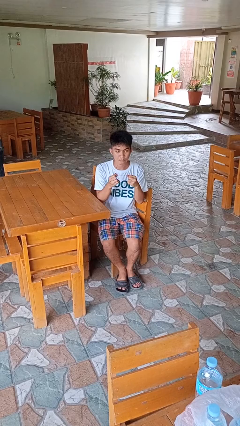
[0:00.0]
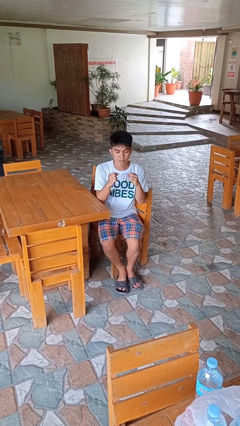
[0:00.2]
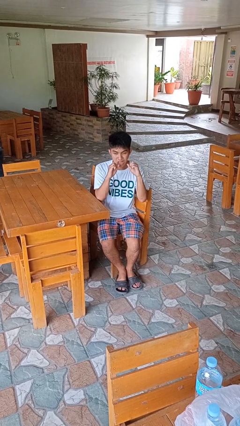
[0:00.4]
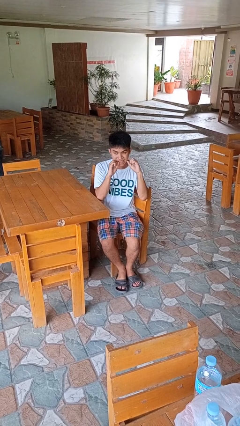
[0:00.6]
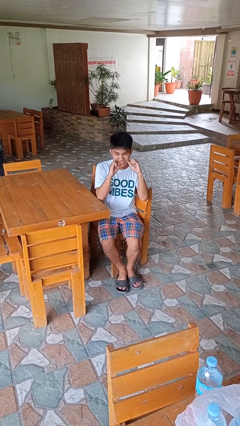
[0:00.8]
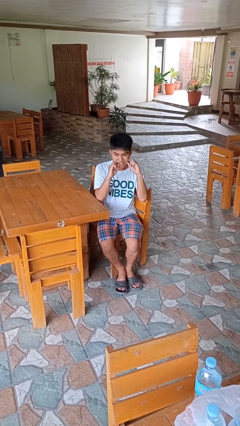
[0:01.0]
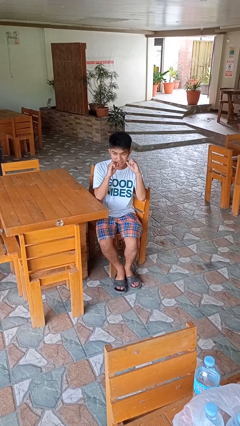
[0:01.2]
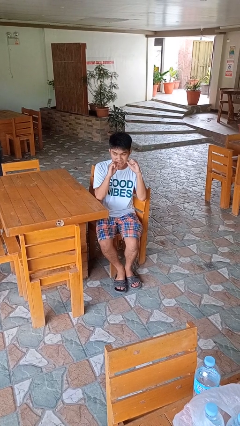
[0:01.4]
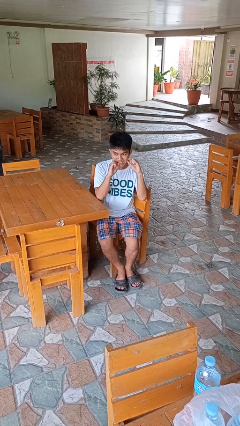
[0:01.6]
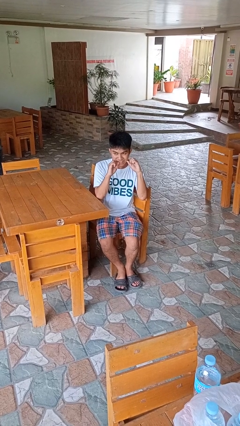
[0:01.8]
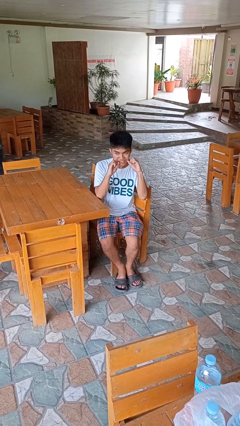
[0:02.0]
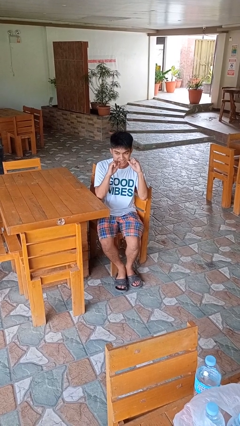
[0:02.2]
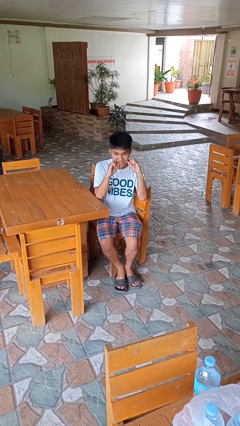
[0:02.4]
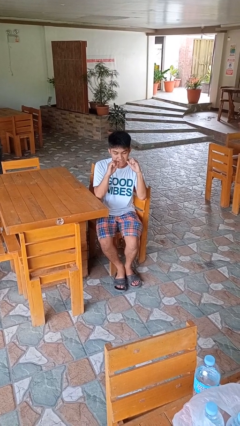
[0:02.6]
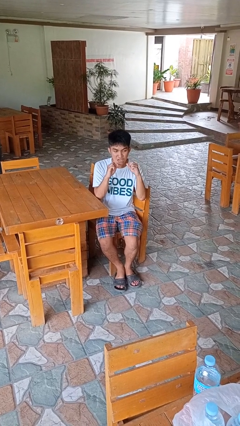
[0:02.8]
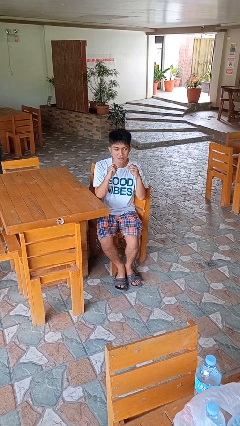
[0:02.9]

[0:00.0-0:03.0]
person flosses

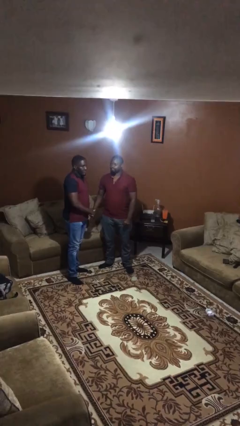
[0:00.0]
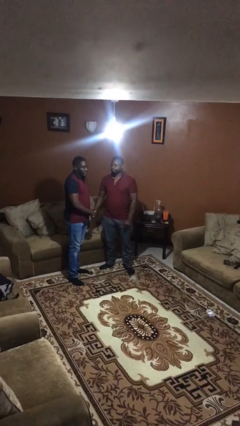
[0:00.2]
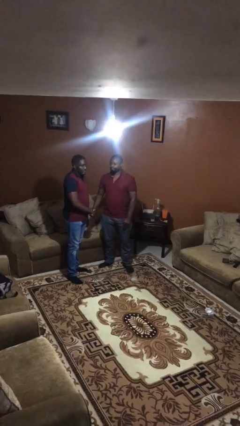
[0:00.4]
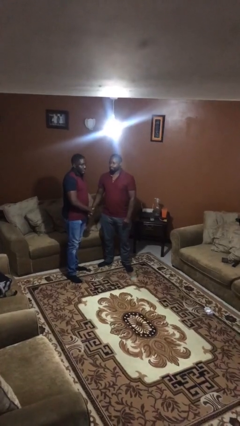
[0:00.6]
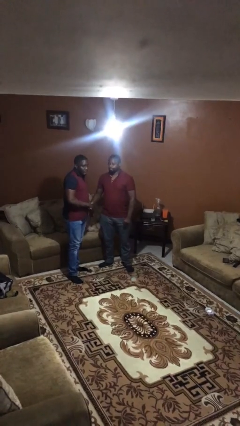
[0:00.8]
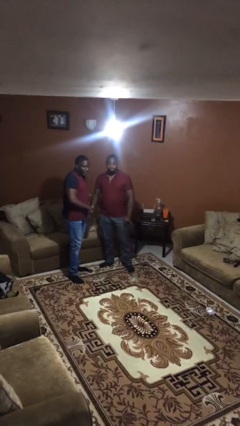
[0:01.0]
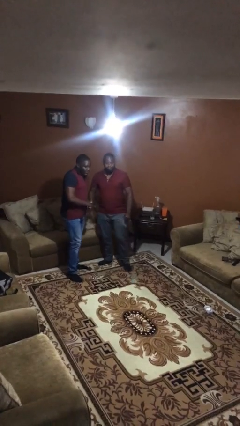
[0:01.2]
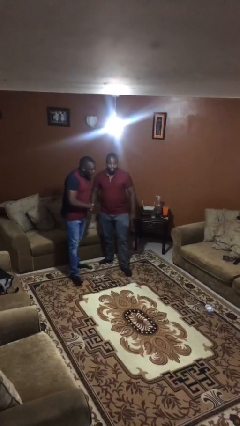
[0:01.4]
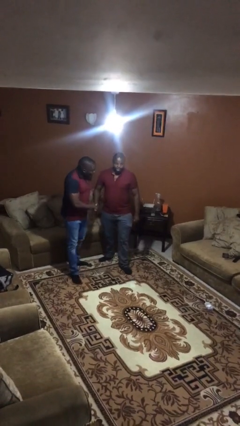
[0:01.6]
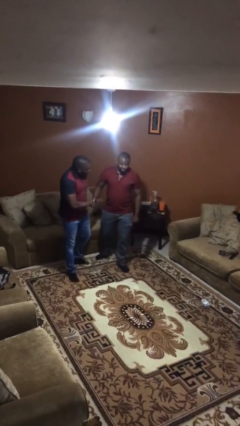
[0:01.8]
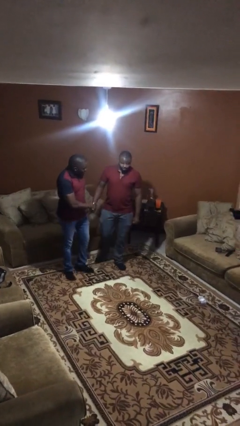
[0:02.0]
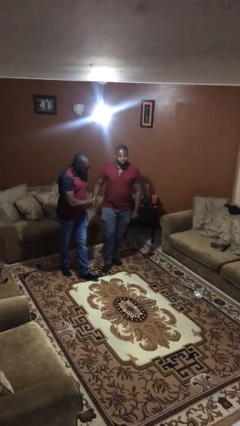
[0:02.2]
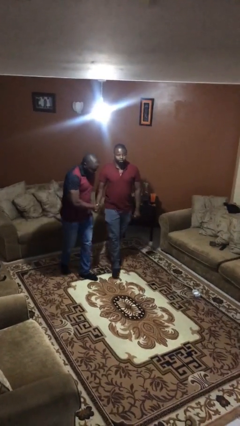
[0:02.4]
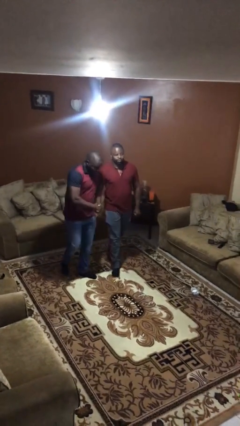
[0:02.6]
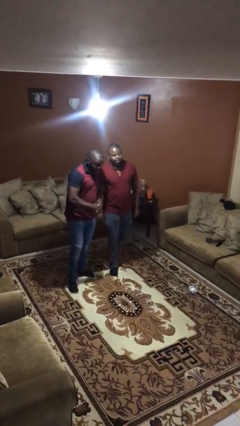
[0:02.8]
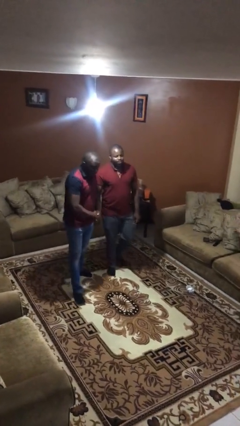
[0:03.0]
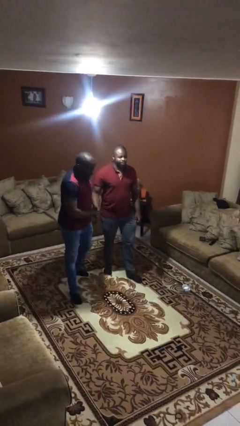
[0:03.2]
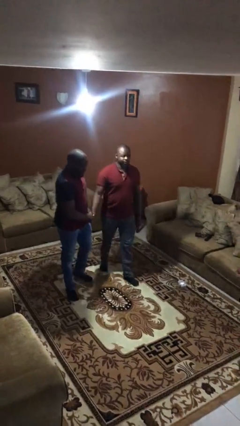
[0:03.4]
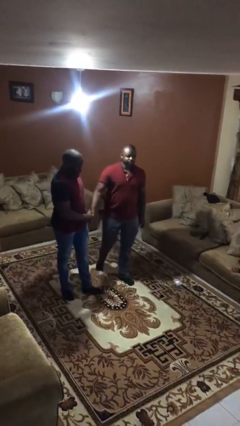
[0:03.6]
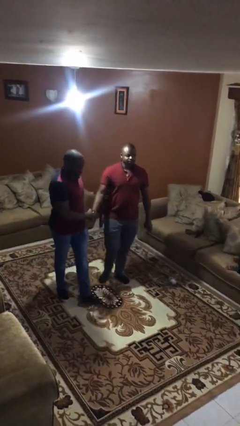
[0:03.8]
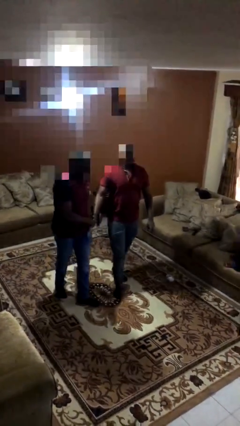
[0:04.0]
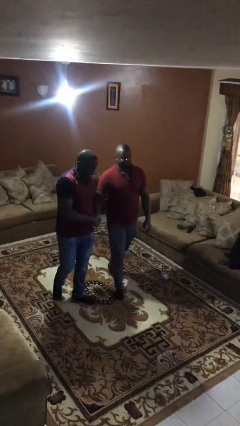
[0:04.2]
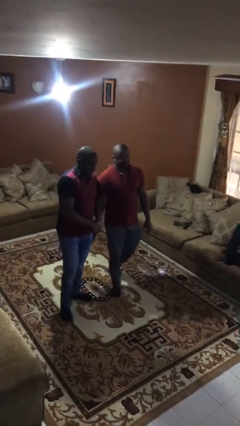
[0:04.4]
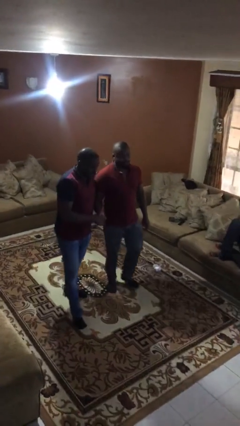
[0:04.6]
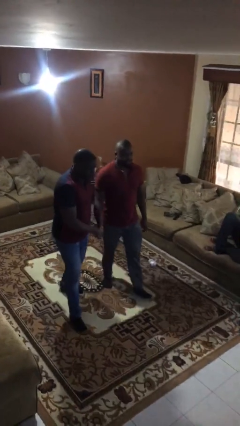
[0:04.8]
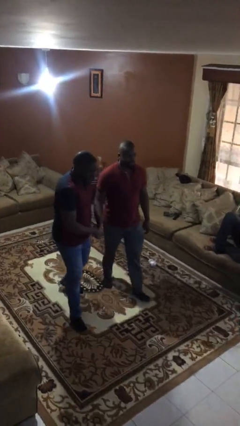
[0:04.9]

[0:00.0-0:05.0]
person holds hand

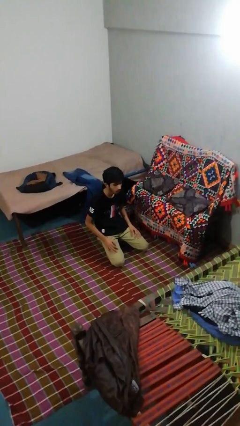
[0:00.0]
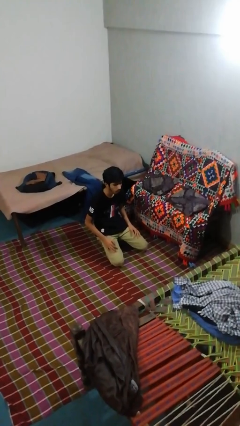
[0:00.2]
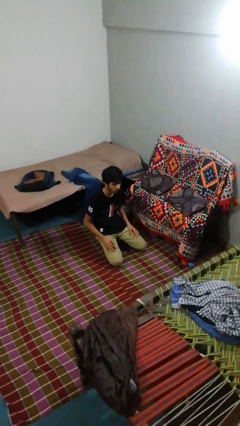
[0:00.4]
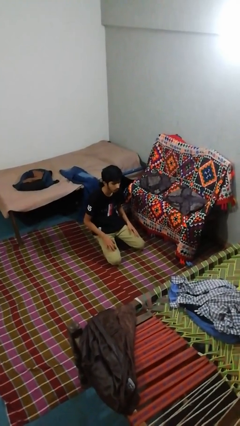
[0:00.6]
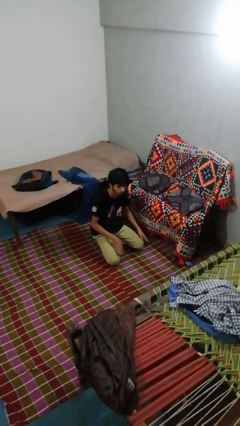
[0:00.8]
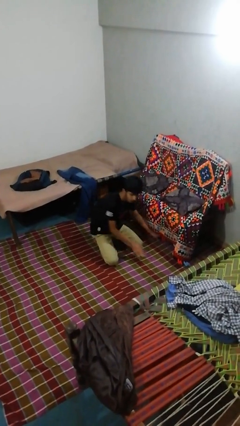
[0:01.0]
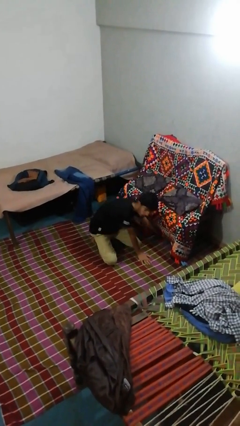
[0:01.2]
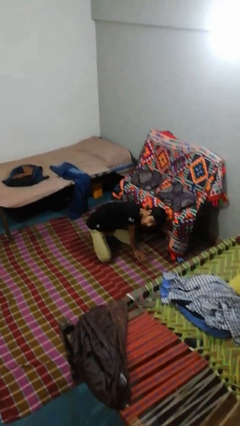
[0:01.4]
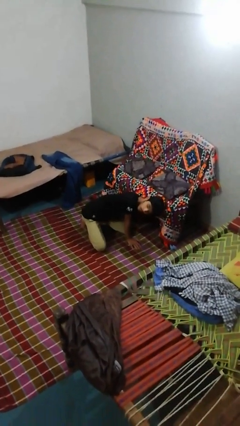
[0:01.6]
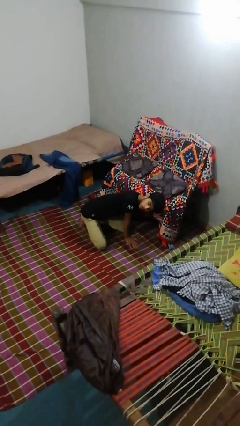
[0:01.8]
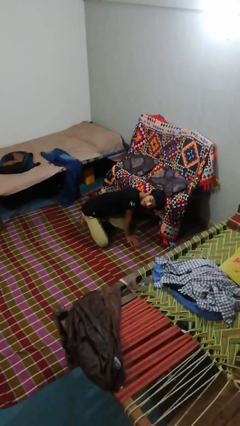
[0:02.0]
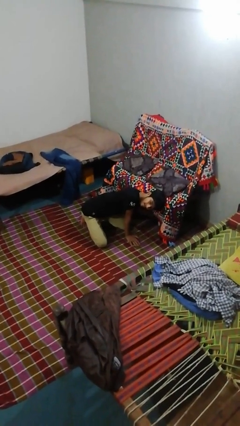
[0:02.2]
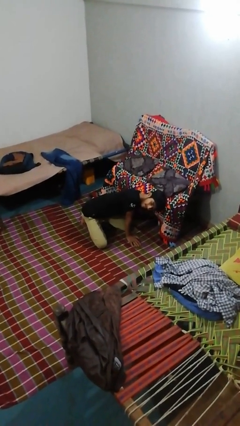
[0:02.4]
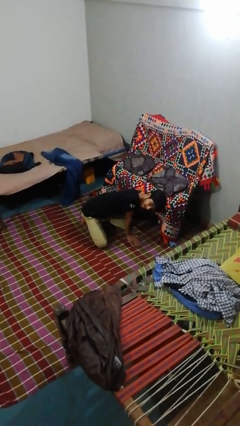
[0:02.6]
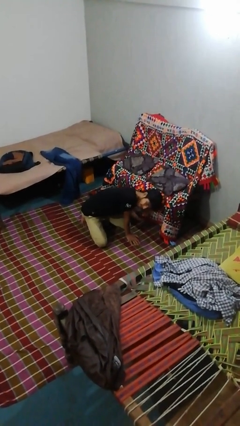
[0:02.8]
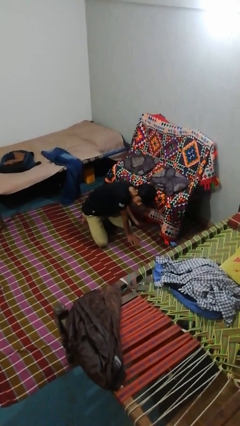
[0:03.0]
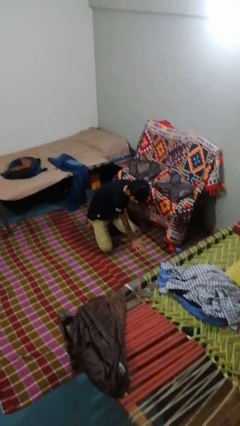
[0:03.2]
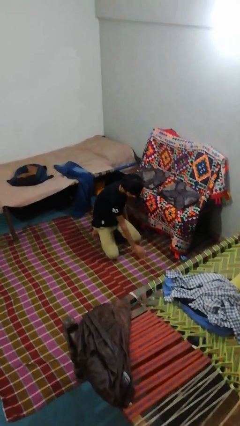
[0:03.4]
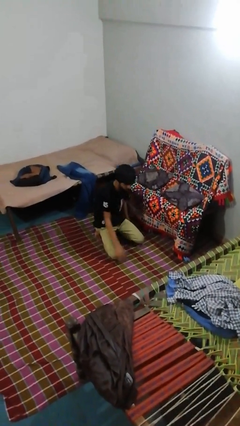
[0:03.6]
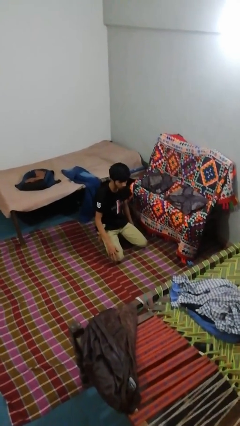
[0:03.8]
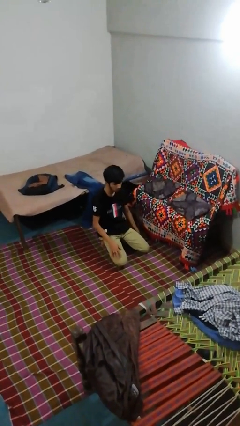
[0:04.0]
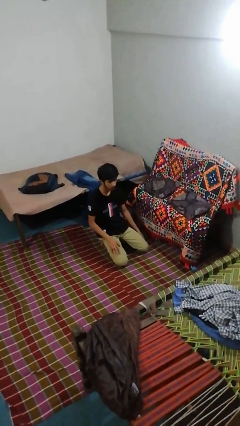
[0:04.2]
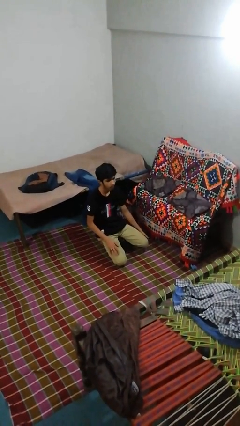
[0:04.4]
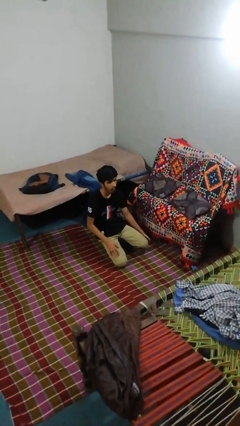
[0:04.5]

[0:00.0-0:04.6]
person searches under couch

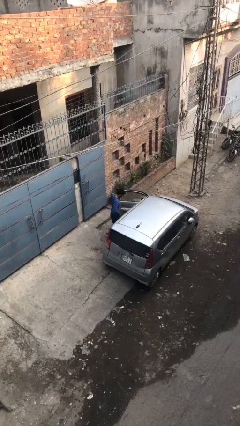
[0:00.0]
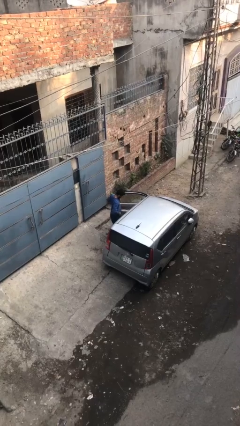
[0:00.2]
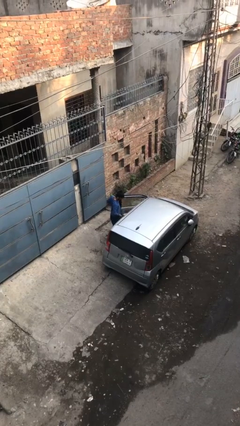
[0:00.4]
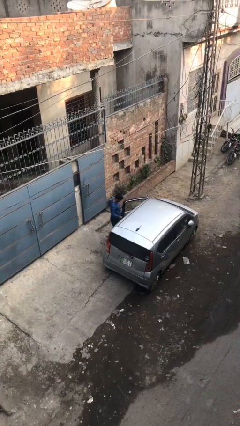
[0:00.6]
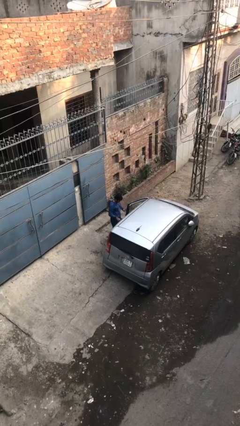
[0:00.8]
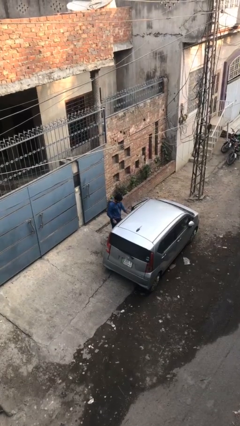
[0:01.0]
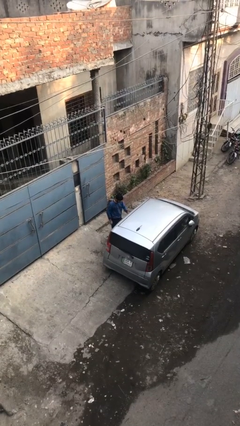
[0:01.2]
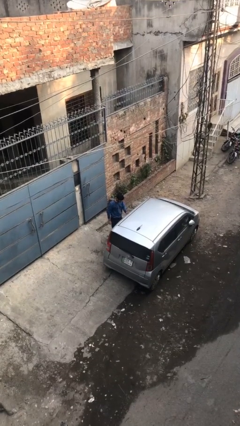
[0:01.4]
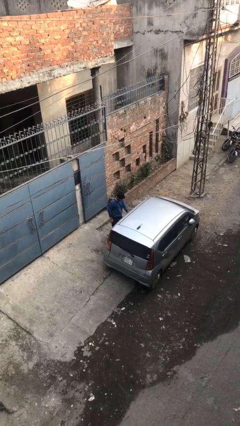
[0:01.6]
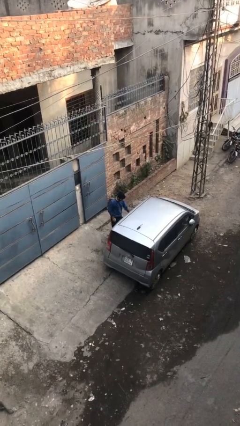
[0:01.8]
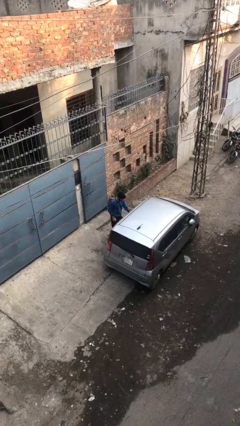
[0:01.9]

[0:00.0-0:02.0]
person closes car door

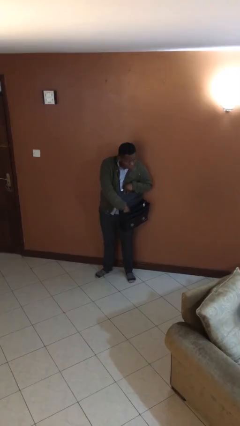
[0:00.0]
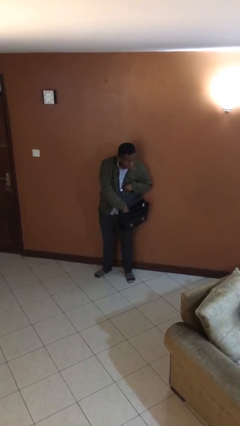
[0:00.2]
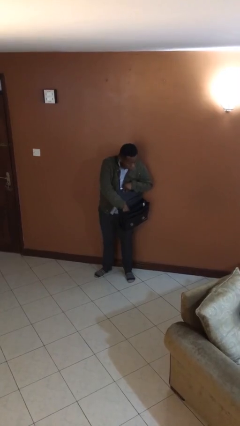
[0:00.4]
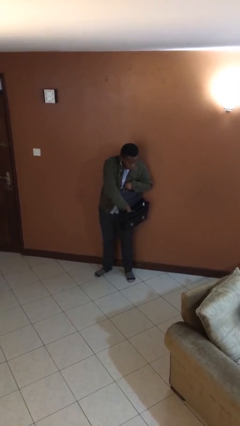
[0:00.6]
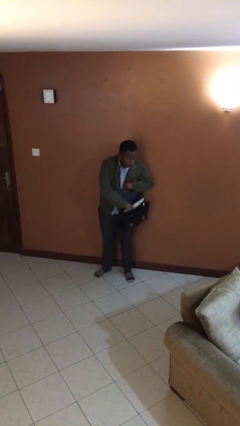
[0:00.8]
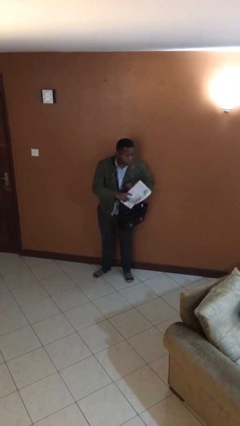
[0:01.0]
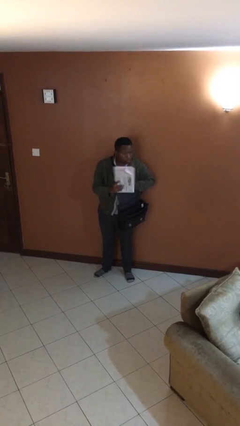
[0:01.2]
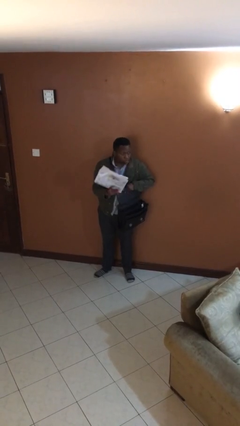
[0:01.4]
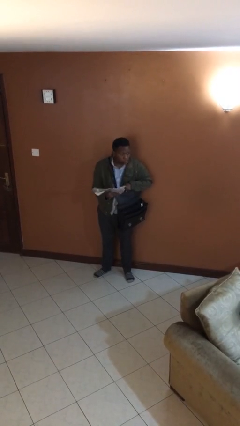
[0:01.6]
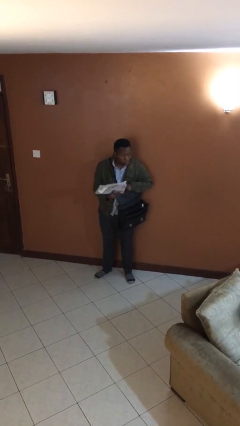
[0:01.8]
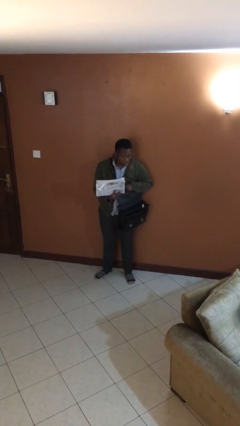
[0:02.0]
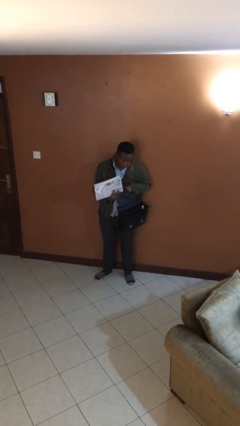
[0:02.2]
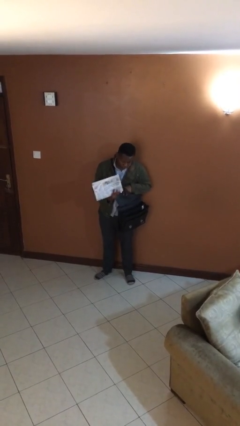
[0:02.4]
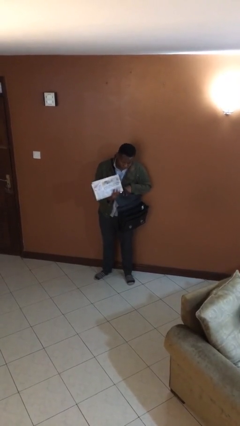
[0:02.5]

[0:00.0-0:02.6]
person takes object from purse

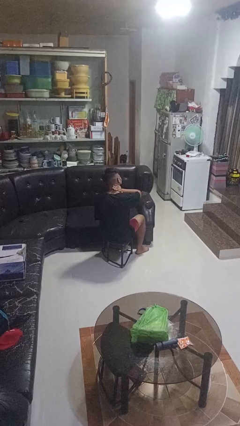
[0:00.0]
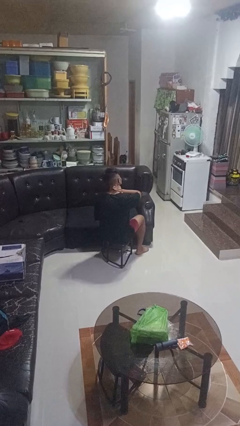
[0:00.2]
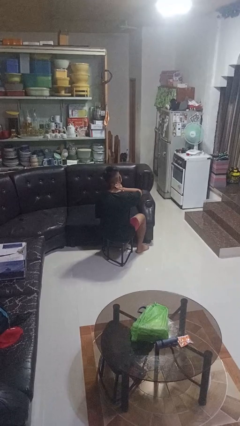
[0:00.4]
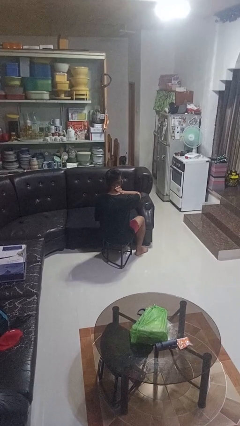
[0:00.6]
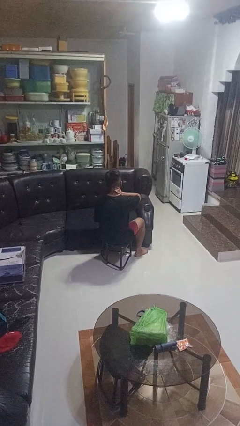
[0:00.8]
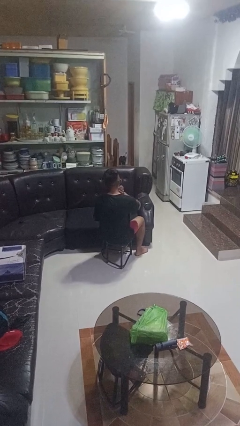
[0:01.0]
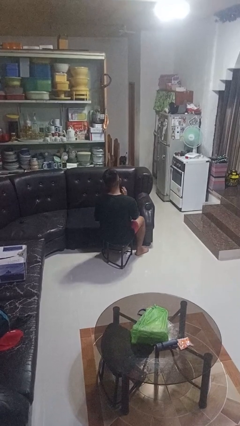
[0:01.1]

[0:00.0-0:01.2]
person swats bug
